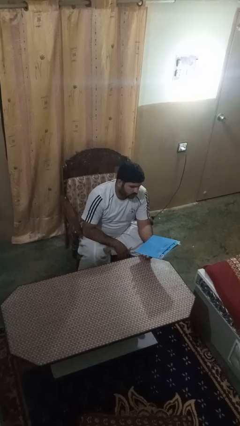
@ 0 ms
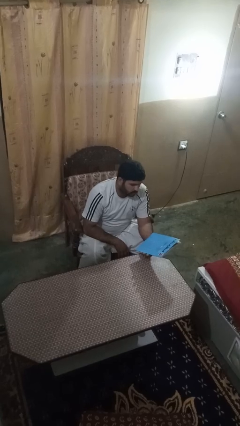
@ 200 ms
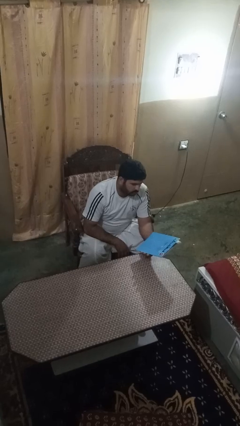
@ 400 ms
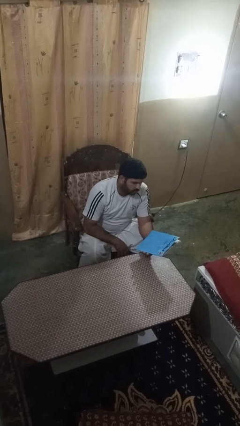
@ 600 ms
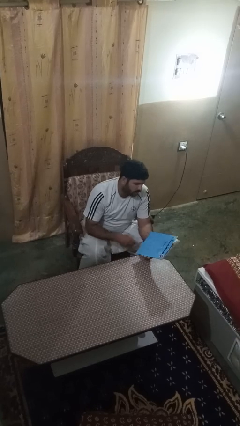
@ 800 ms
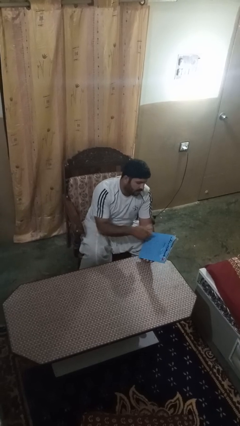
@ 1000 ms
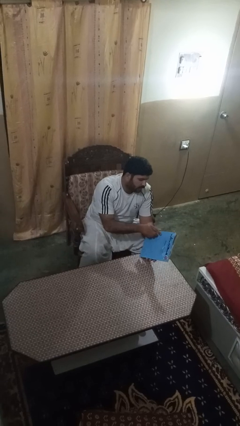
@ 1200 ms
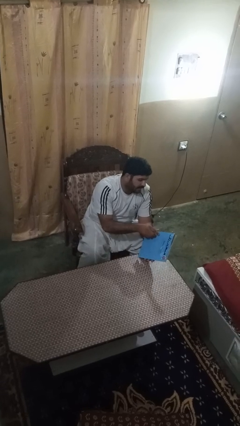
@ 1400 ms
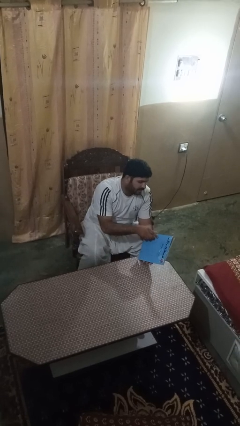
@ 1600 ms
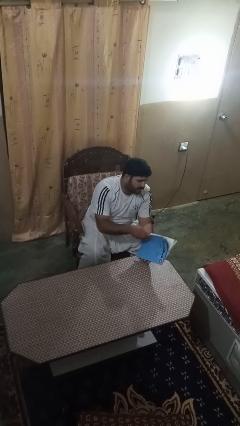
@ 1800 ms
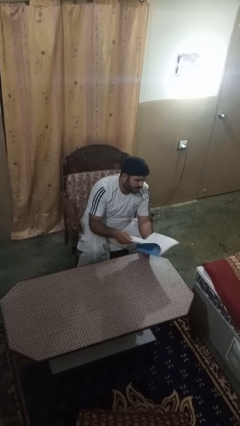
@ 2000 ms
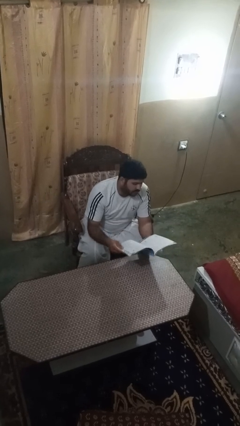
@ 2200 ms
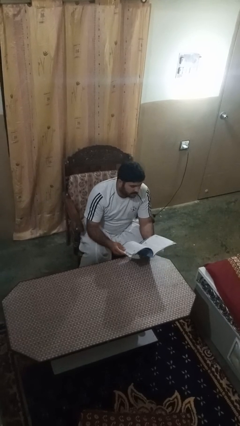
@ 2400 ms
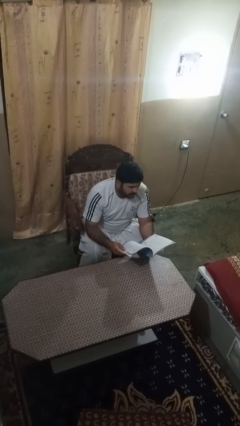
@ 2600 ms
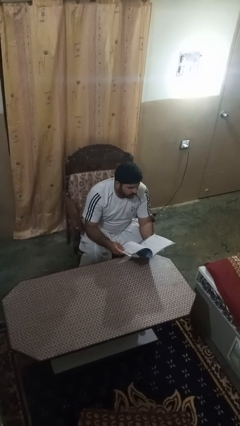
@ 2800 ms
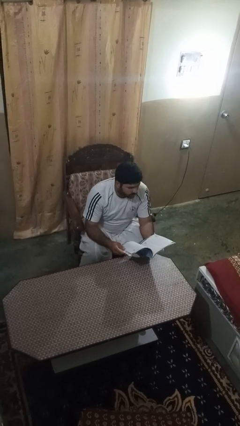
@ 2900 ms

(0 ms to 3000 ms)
person reads magazine

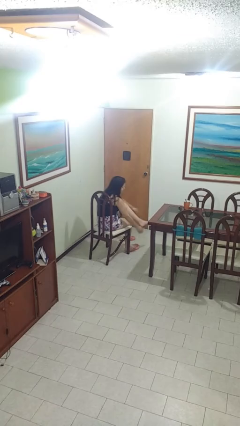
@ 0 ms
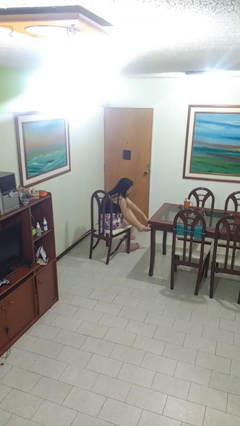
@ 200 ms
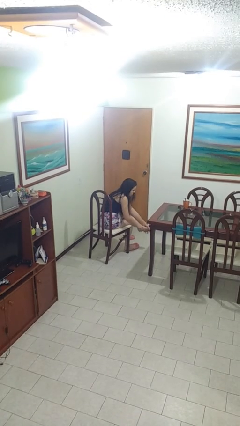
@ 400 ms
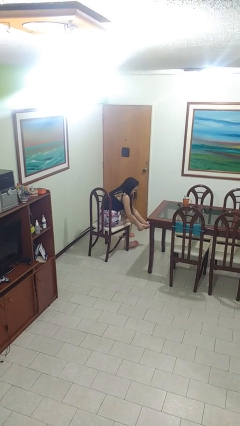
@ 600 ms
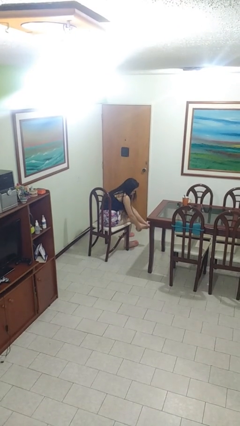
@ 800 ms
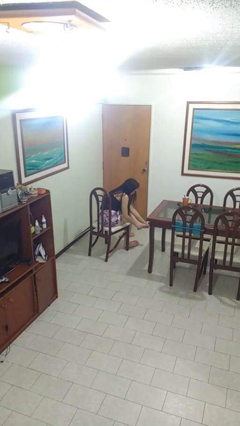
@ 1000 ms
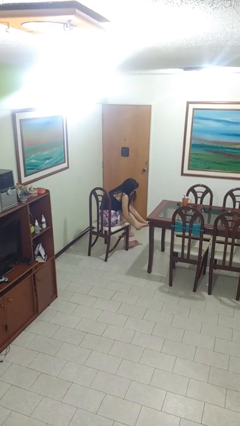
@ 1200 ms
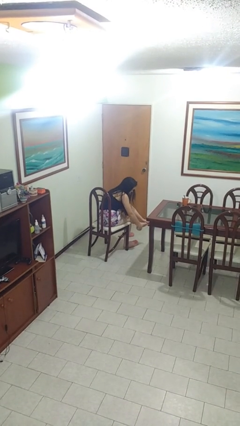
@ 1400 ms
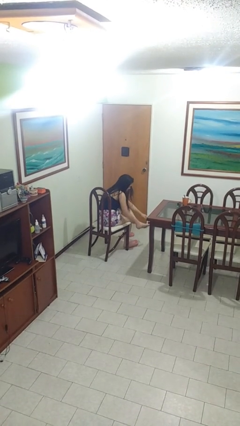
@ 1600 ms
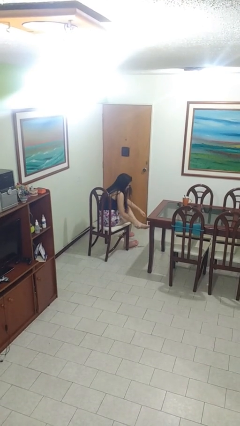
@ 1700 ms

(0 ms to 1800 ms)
person rubs foot

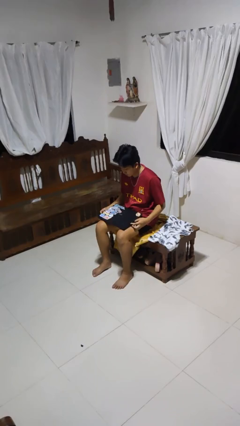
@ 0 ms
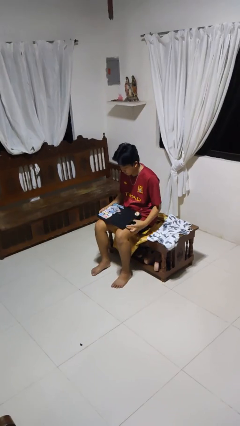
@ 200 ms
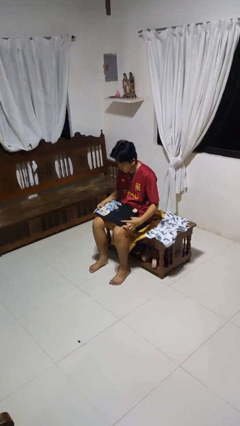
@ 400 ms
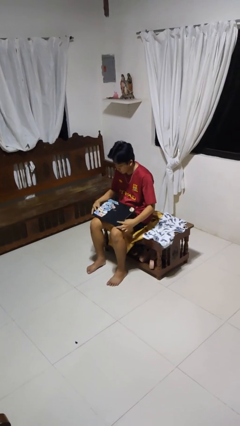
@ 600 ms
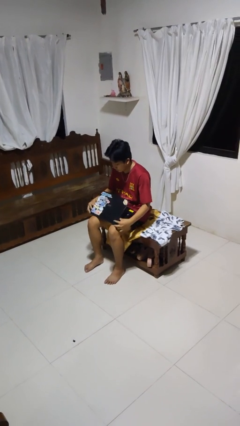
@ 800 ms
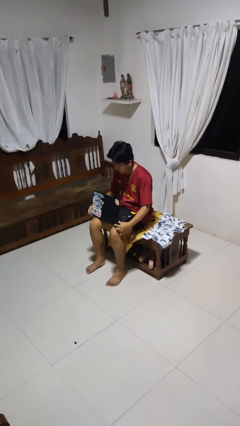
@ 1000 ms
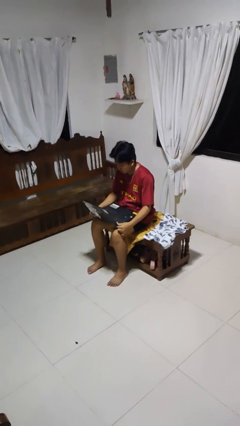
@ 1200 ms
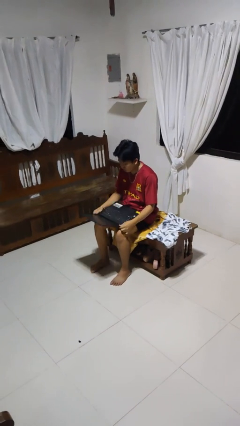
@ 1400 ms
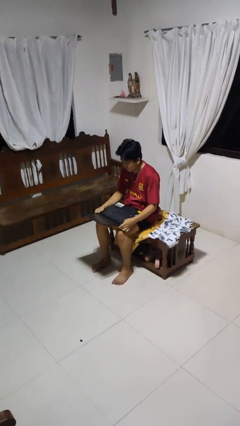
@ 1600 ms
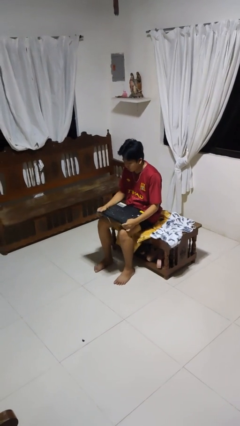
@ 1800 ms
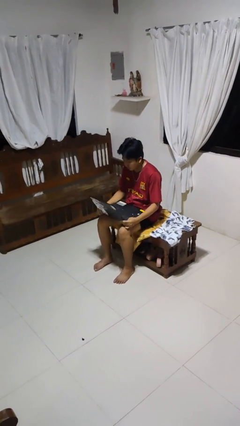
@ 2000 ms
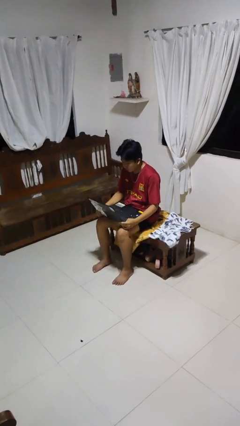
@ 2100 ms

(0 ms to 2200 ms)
person opens laptop

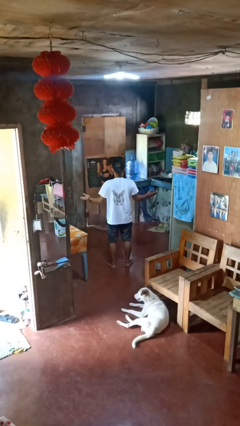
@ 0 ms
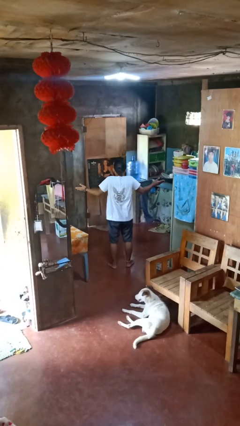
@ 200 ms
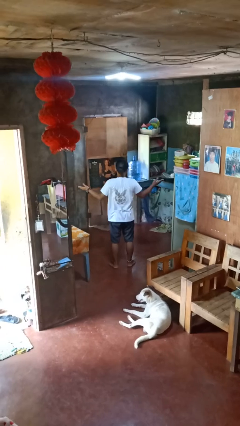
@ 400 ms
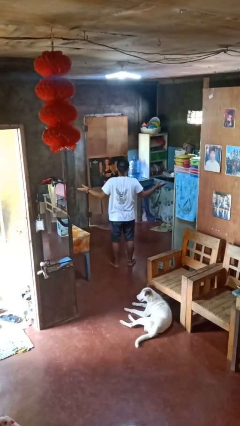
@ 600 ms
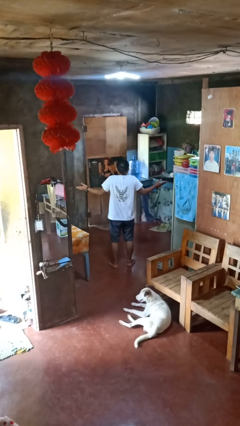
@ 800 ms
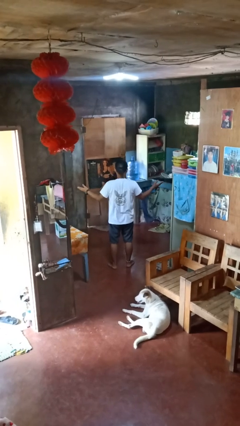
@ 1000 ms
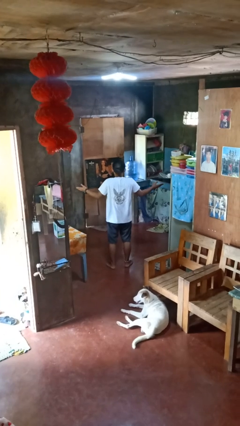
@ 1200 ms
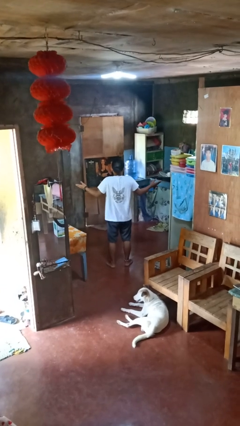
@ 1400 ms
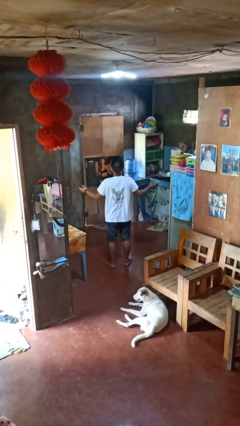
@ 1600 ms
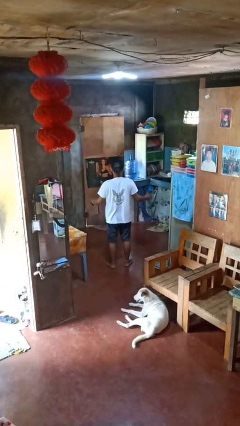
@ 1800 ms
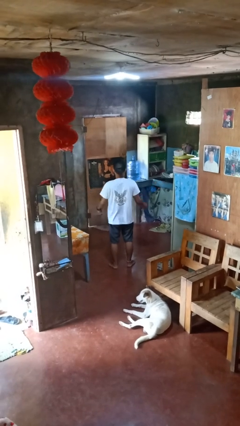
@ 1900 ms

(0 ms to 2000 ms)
person shrugs

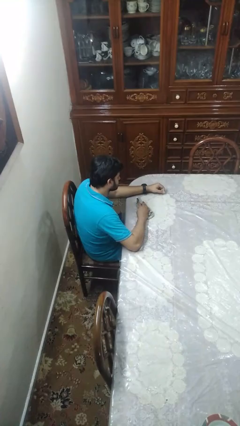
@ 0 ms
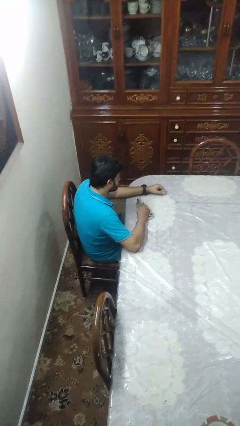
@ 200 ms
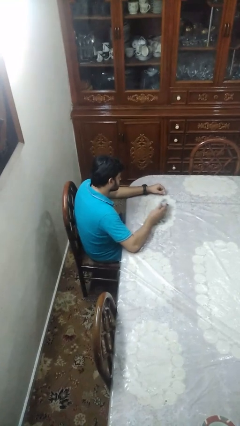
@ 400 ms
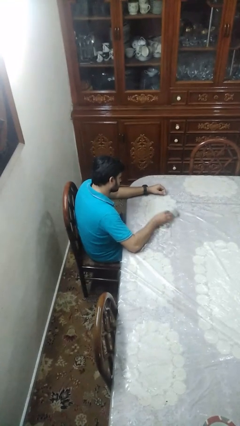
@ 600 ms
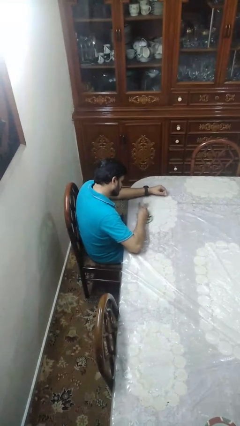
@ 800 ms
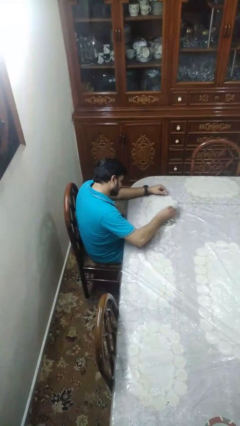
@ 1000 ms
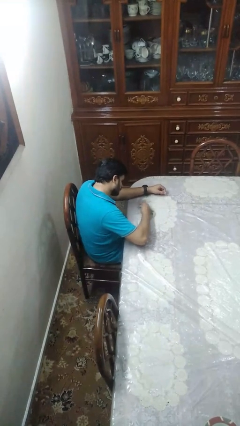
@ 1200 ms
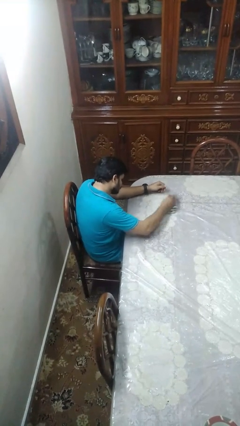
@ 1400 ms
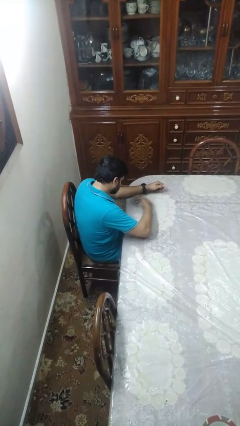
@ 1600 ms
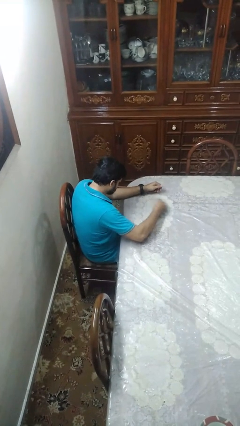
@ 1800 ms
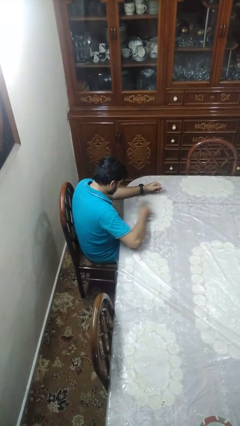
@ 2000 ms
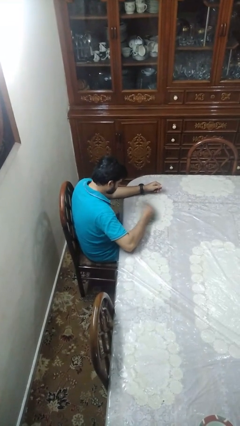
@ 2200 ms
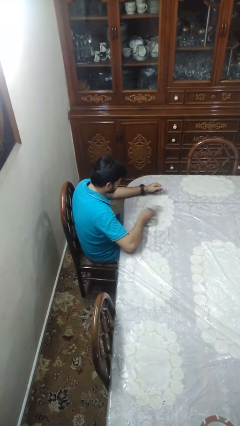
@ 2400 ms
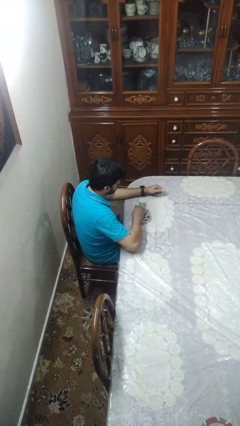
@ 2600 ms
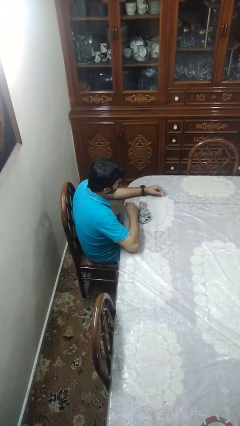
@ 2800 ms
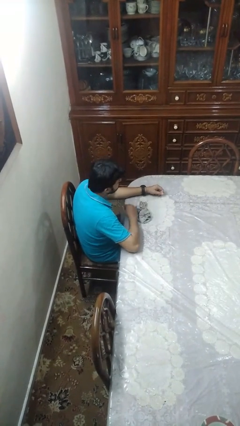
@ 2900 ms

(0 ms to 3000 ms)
person cleans table with rag

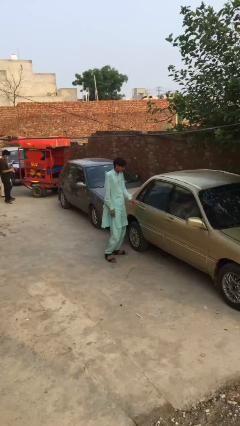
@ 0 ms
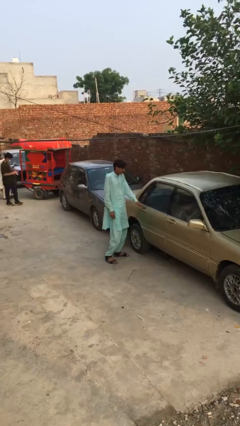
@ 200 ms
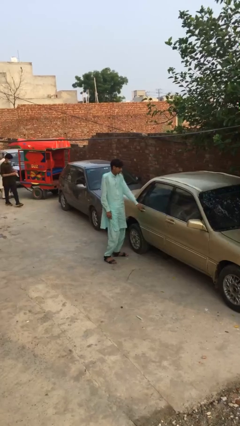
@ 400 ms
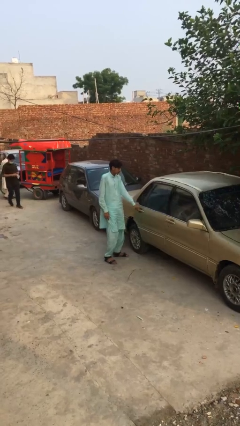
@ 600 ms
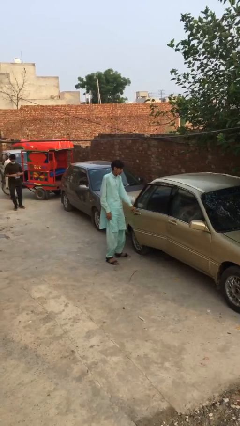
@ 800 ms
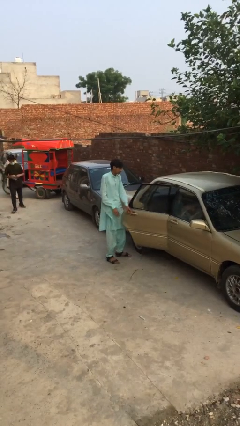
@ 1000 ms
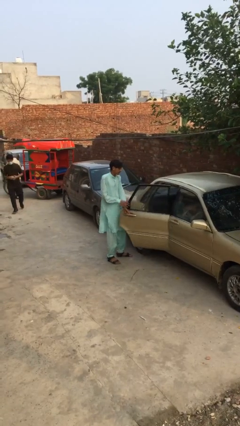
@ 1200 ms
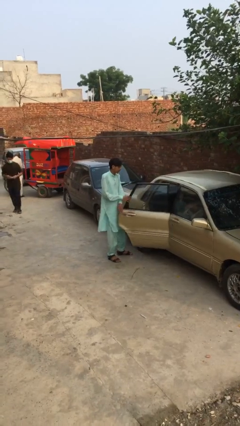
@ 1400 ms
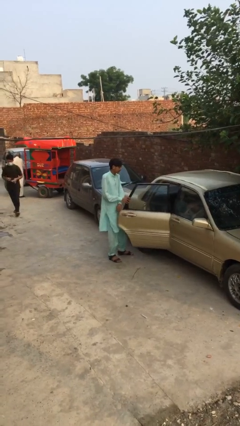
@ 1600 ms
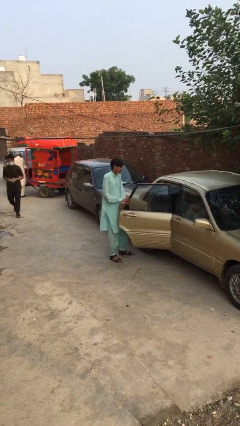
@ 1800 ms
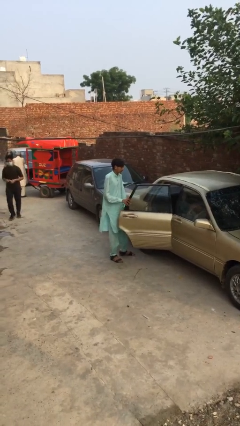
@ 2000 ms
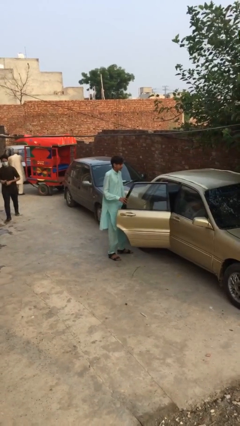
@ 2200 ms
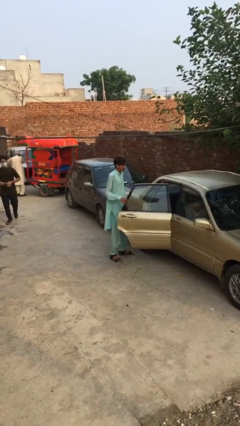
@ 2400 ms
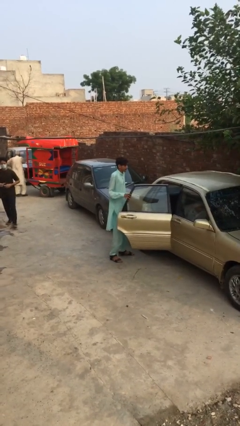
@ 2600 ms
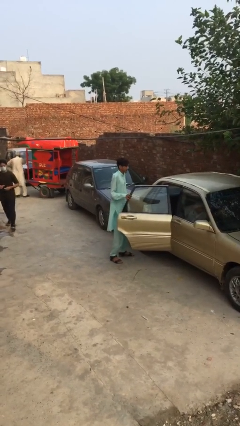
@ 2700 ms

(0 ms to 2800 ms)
person opens car door

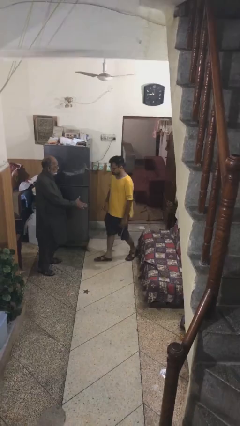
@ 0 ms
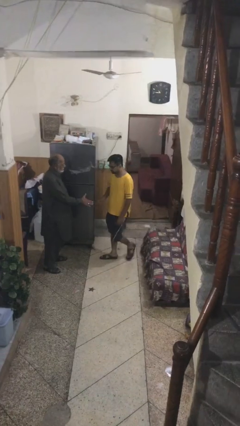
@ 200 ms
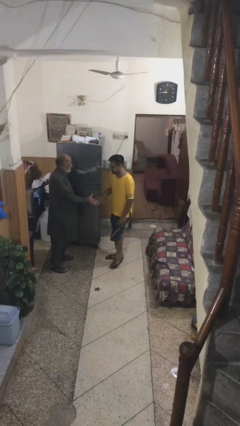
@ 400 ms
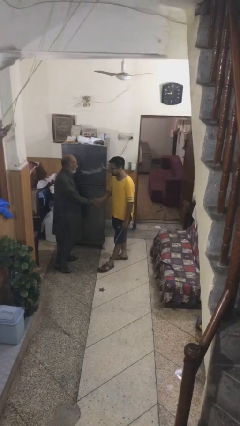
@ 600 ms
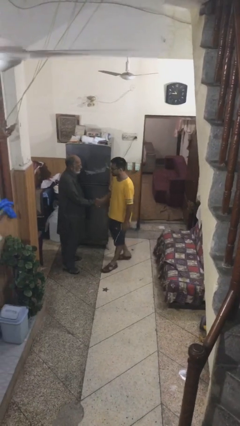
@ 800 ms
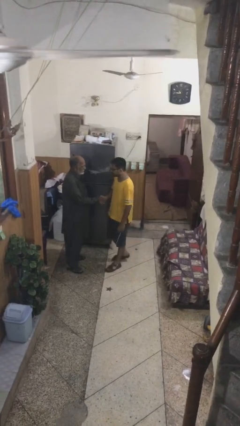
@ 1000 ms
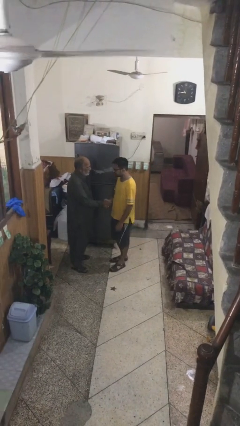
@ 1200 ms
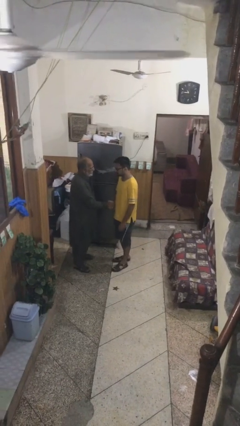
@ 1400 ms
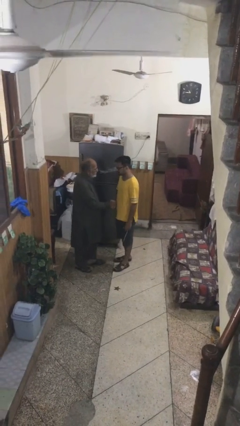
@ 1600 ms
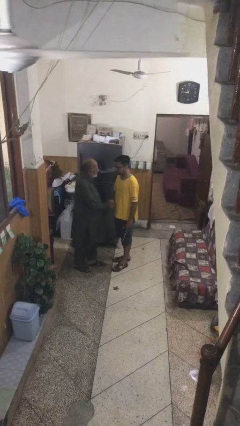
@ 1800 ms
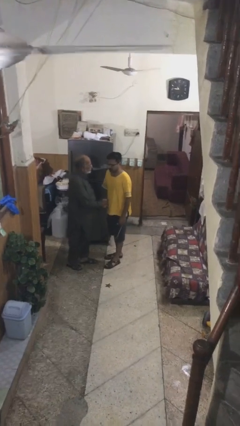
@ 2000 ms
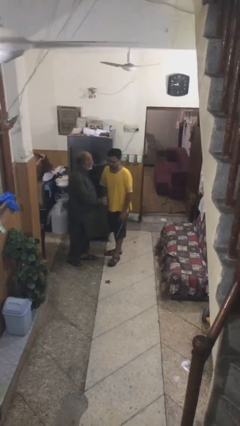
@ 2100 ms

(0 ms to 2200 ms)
person shakes hand

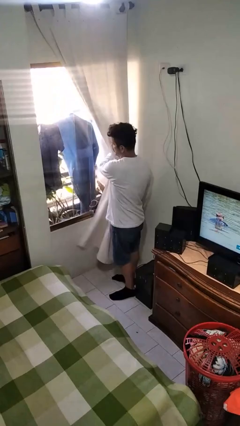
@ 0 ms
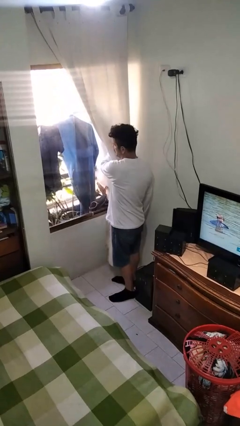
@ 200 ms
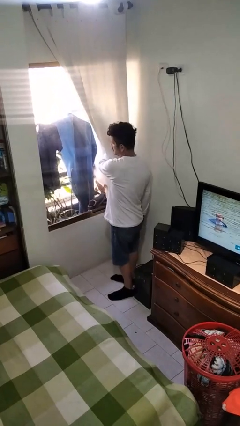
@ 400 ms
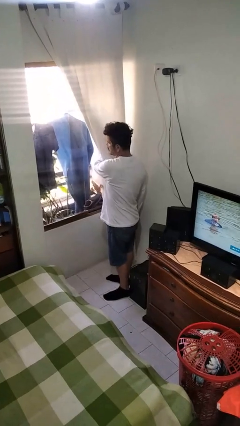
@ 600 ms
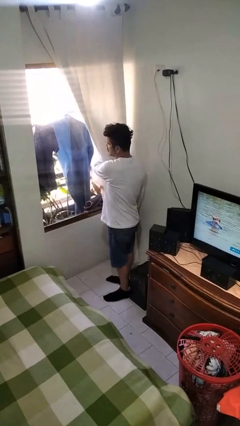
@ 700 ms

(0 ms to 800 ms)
person opens curtains
